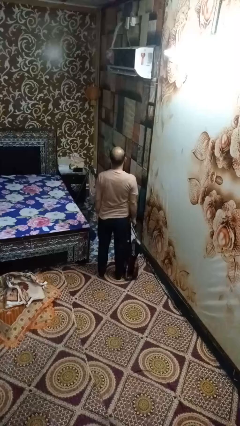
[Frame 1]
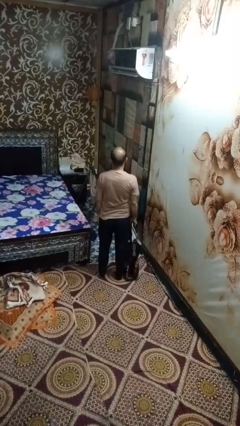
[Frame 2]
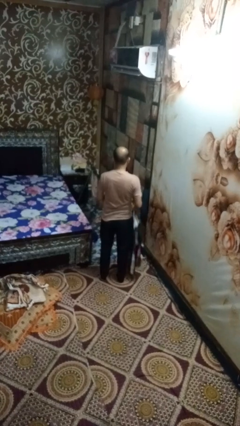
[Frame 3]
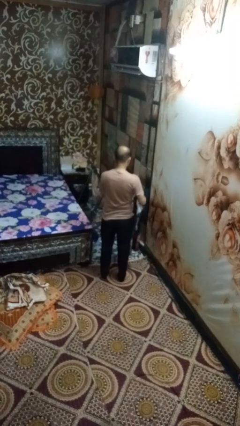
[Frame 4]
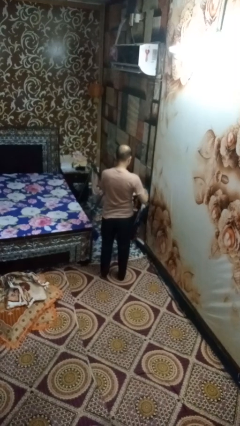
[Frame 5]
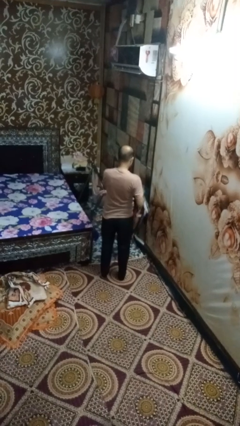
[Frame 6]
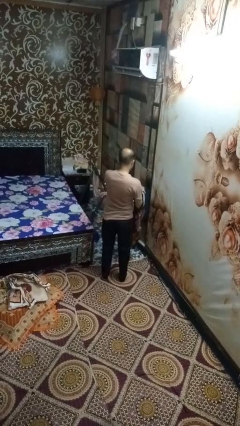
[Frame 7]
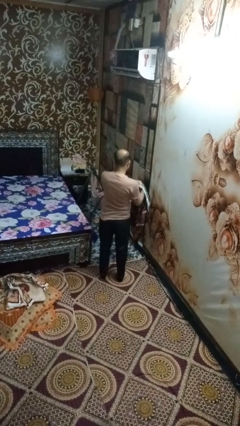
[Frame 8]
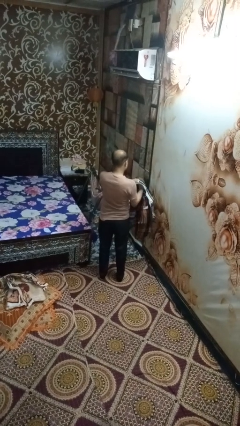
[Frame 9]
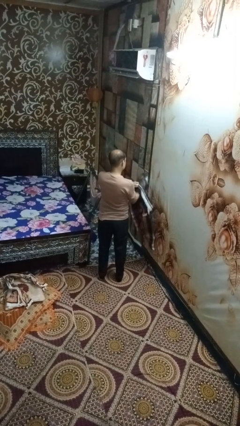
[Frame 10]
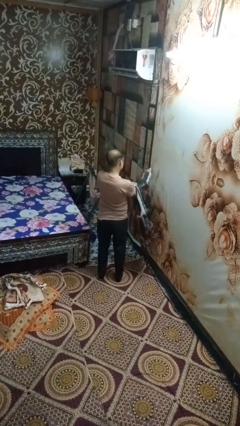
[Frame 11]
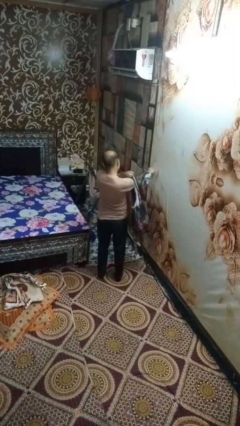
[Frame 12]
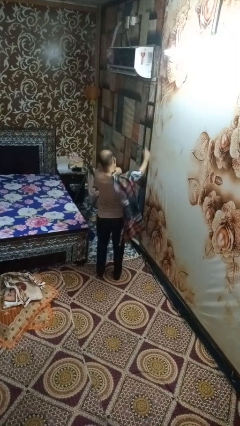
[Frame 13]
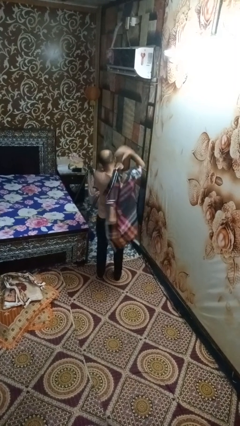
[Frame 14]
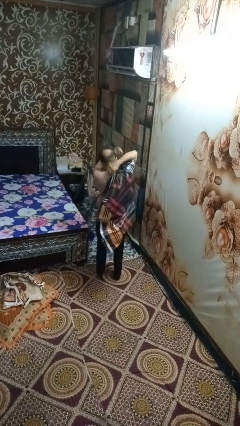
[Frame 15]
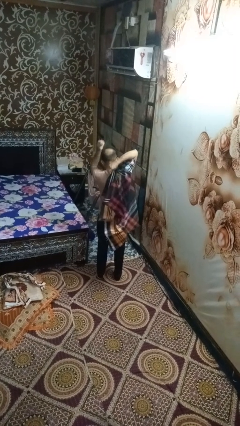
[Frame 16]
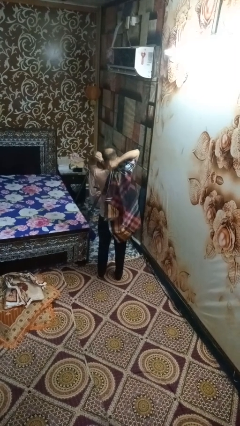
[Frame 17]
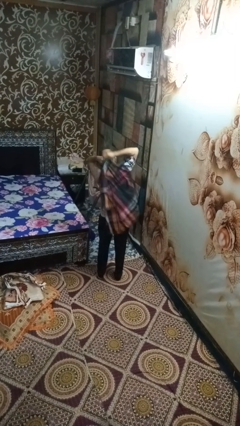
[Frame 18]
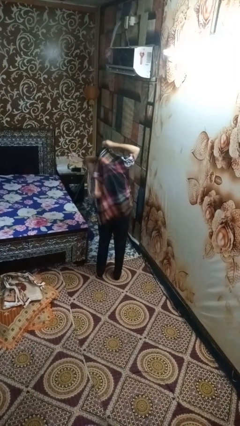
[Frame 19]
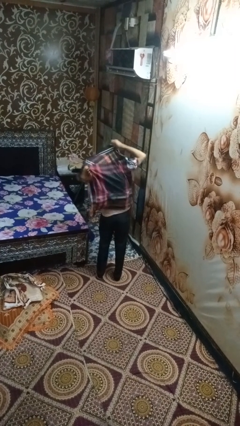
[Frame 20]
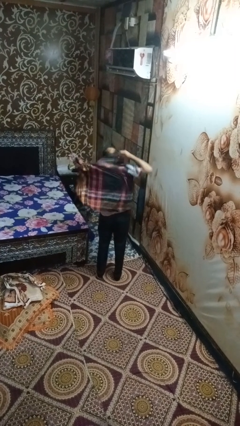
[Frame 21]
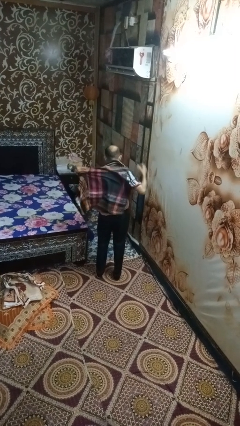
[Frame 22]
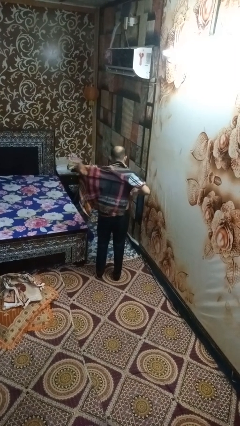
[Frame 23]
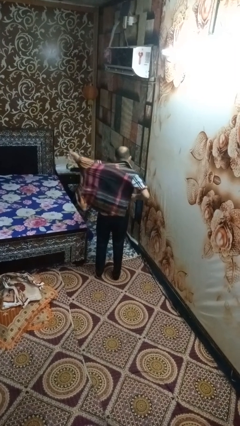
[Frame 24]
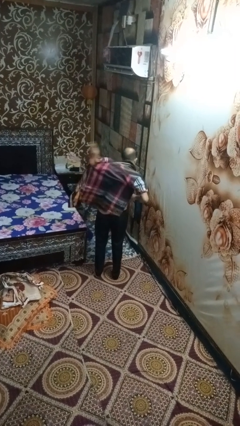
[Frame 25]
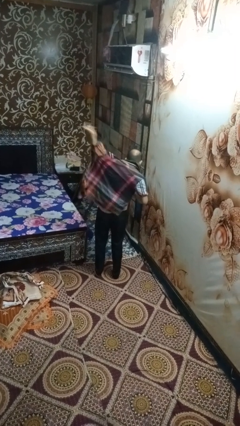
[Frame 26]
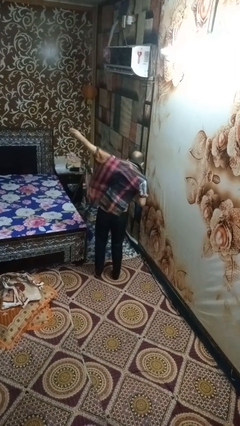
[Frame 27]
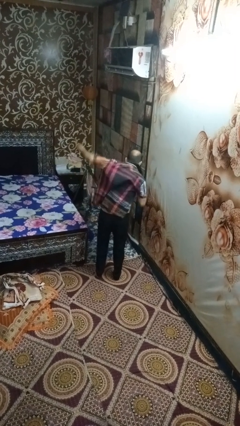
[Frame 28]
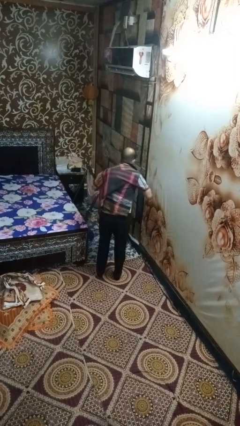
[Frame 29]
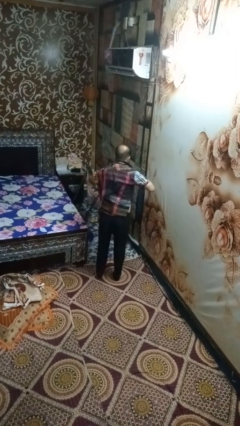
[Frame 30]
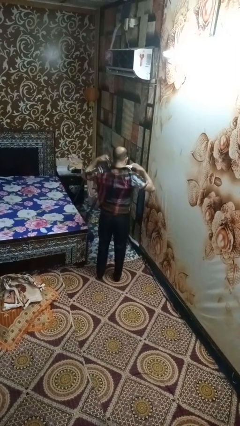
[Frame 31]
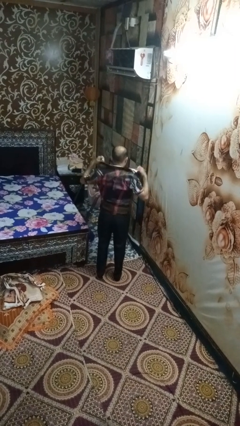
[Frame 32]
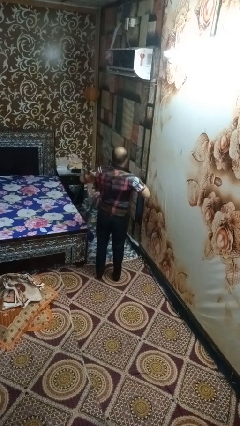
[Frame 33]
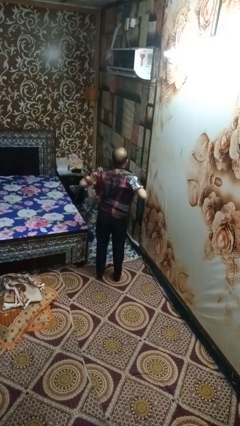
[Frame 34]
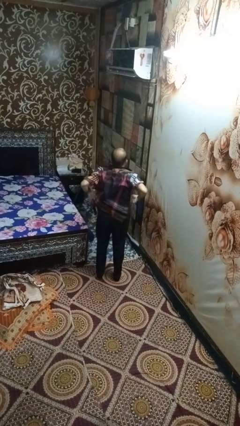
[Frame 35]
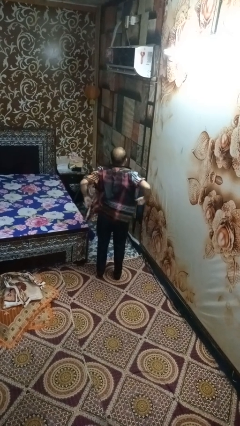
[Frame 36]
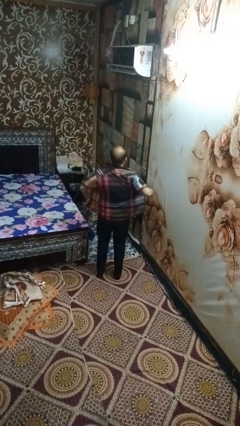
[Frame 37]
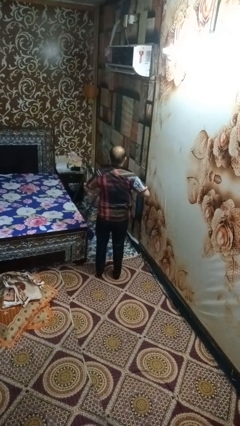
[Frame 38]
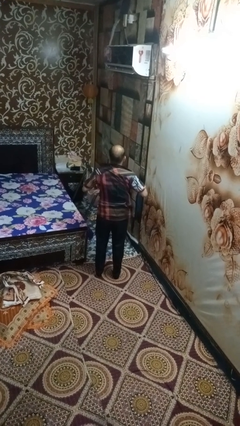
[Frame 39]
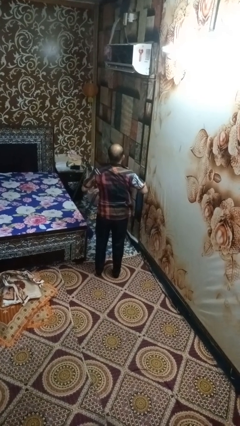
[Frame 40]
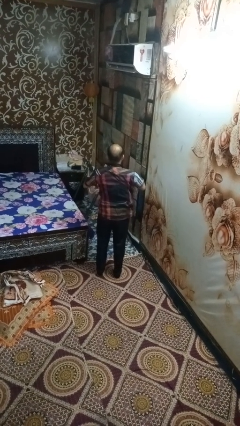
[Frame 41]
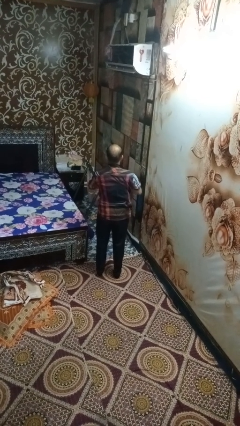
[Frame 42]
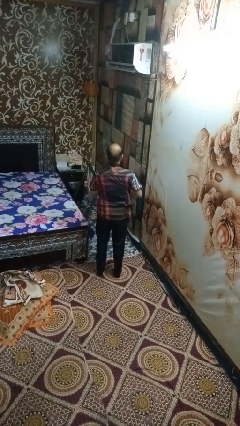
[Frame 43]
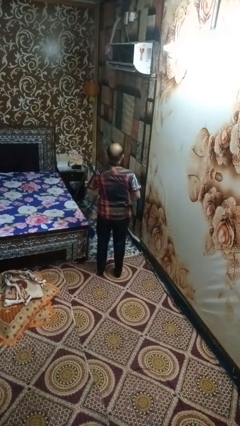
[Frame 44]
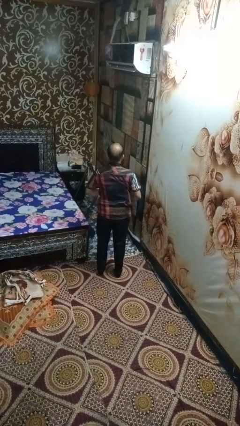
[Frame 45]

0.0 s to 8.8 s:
person puts on shirt

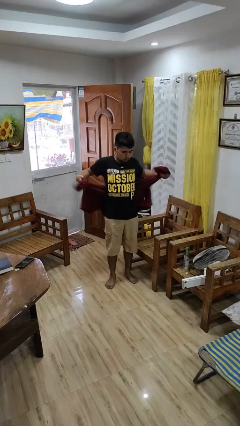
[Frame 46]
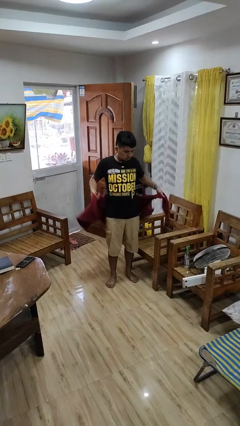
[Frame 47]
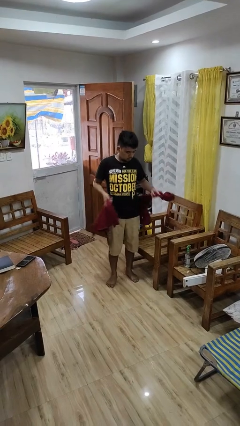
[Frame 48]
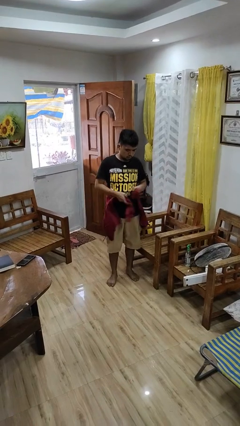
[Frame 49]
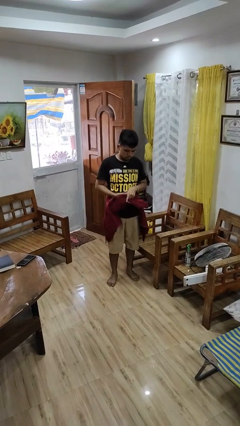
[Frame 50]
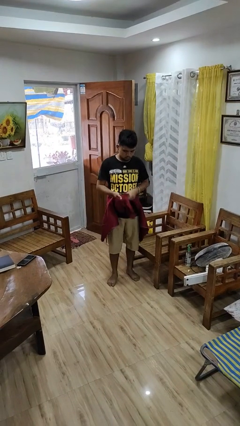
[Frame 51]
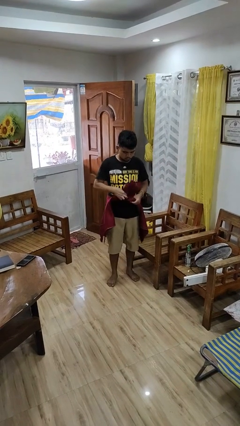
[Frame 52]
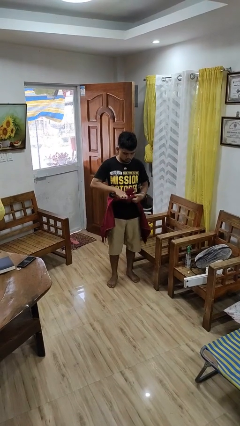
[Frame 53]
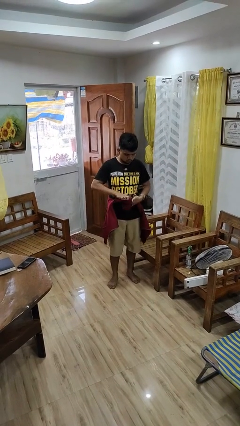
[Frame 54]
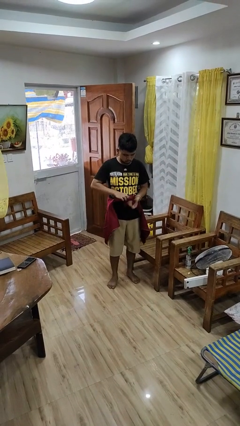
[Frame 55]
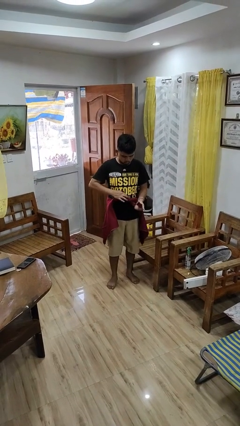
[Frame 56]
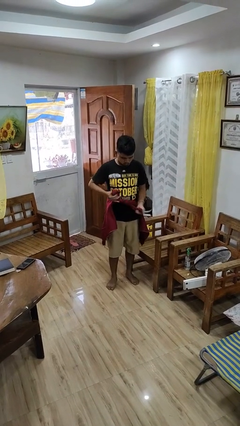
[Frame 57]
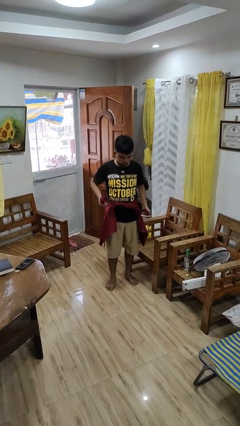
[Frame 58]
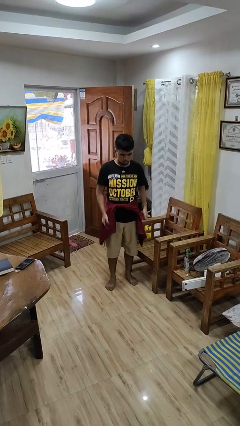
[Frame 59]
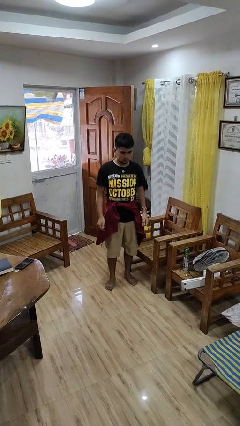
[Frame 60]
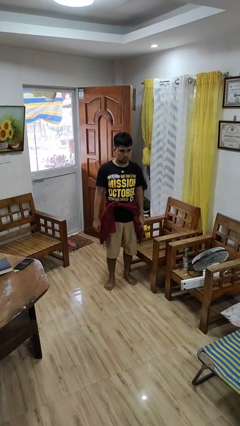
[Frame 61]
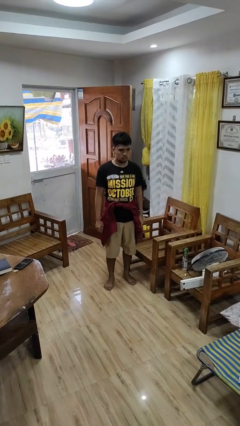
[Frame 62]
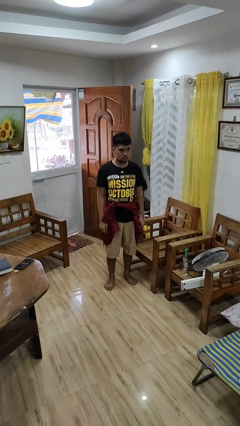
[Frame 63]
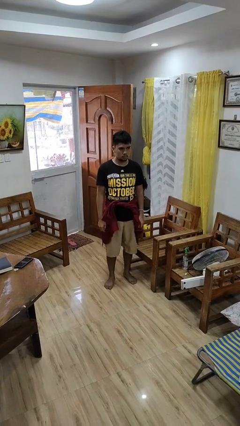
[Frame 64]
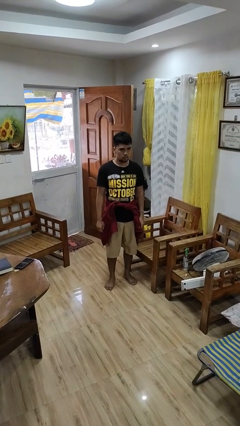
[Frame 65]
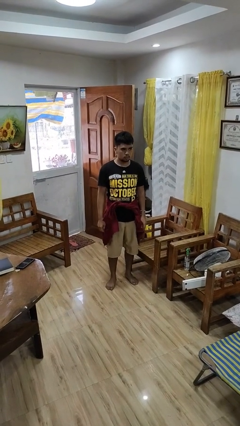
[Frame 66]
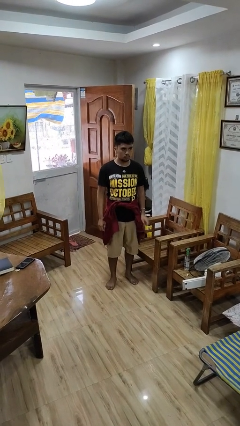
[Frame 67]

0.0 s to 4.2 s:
person ties jacket around waist

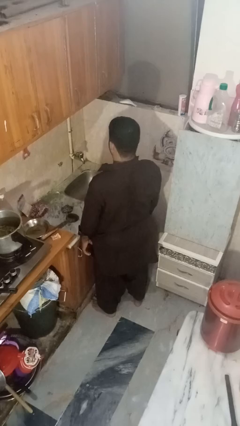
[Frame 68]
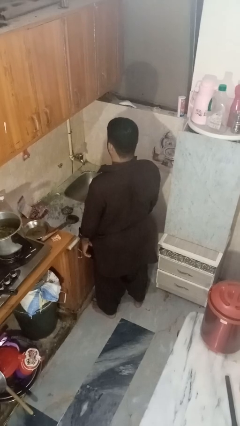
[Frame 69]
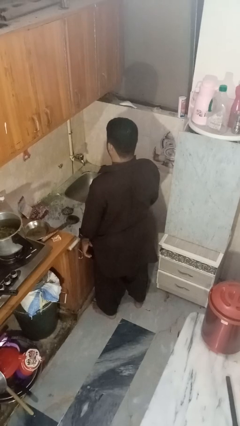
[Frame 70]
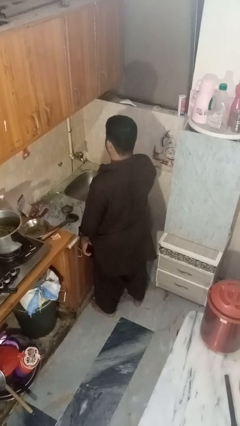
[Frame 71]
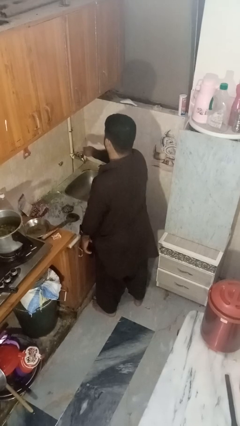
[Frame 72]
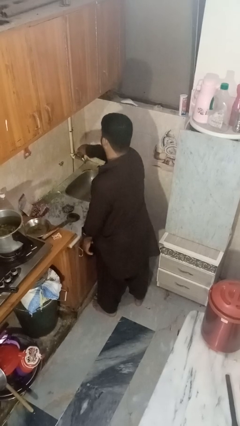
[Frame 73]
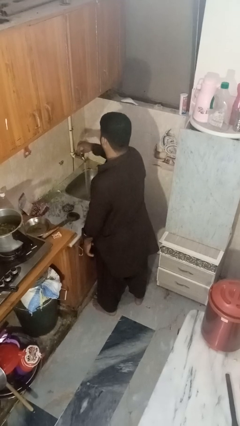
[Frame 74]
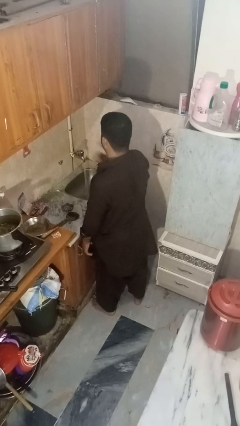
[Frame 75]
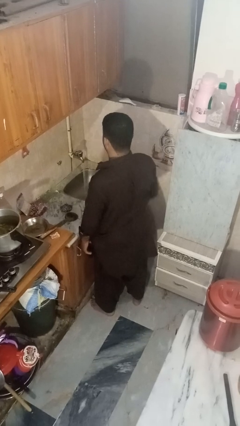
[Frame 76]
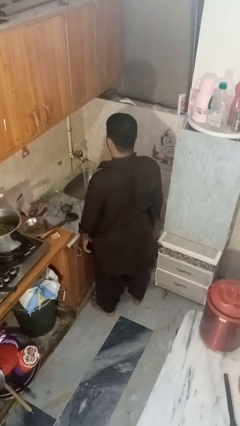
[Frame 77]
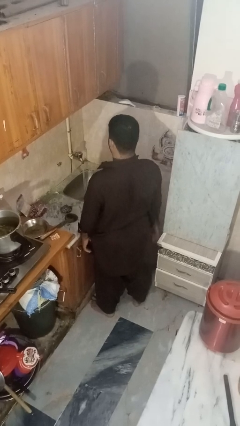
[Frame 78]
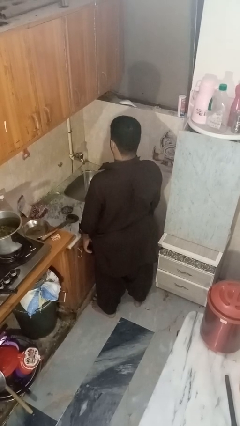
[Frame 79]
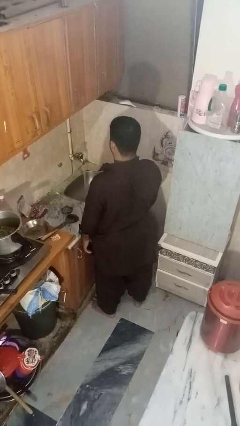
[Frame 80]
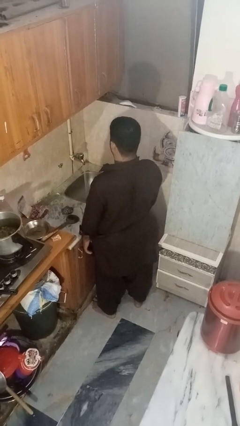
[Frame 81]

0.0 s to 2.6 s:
person turns on faucet

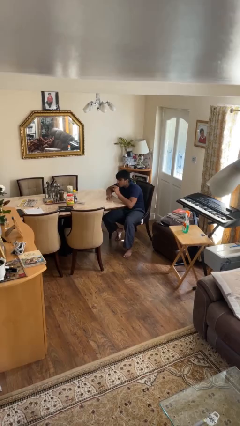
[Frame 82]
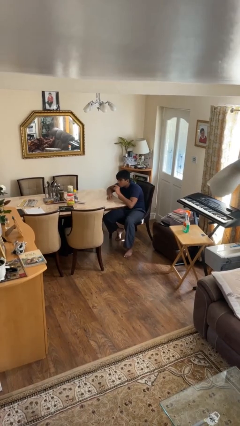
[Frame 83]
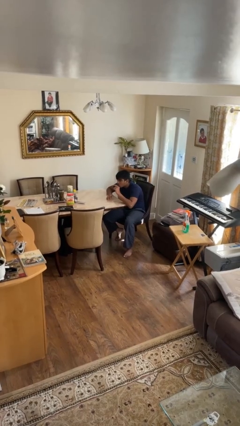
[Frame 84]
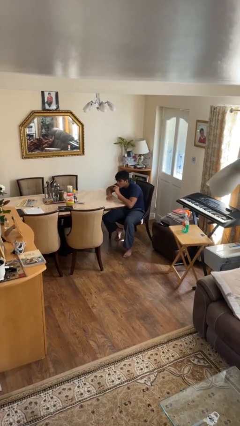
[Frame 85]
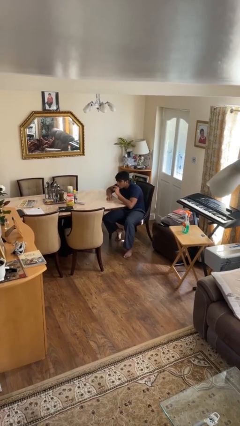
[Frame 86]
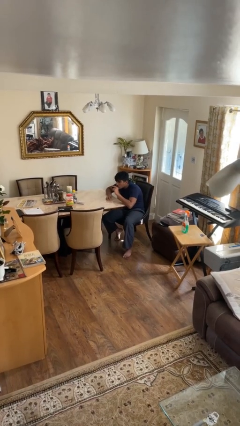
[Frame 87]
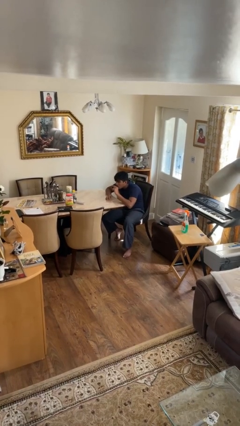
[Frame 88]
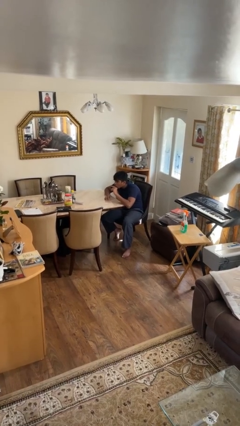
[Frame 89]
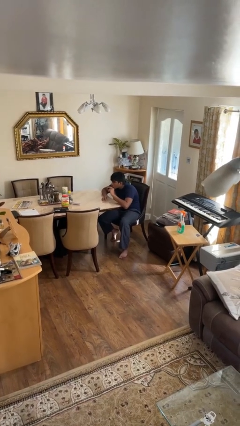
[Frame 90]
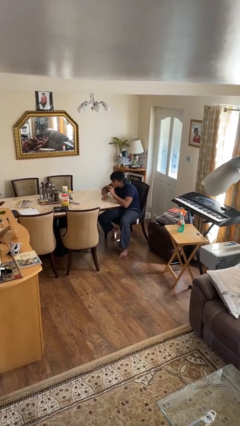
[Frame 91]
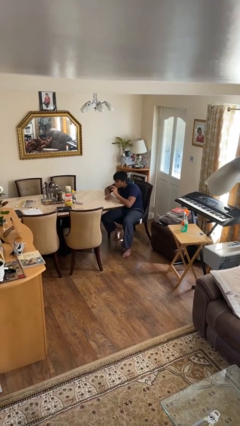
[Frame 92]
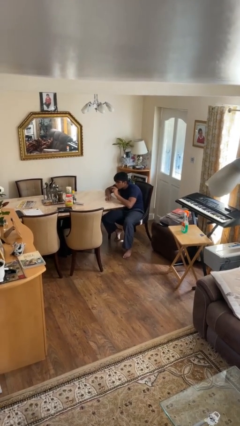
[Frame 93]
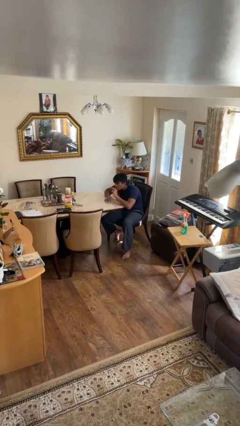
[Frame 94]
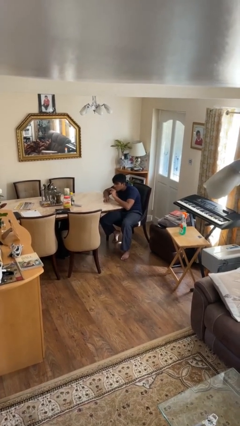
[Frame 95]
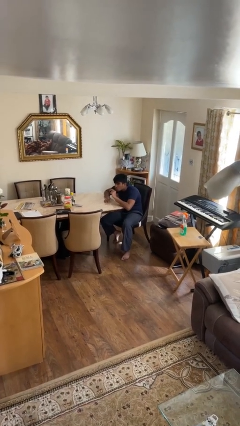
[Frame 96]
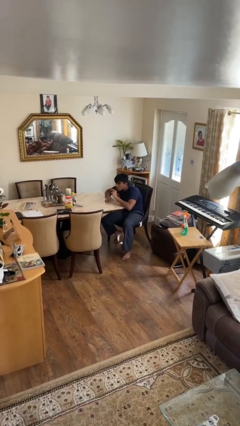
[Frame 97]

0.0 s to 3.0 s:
person applies lip makeup
